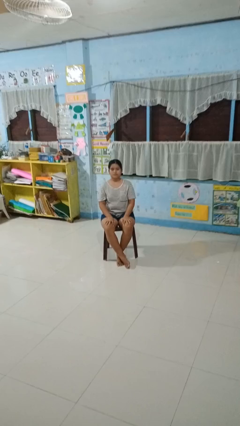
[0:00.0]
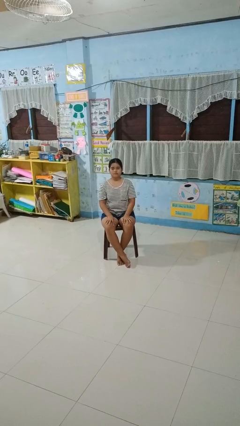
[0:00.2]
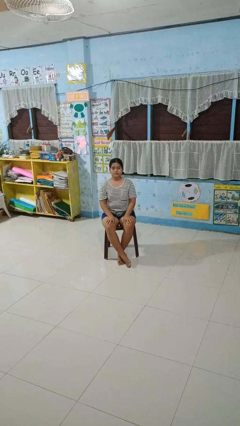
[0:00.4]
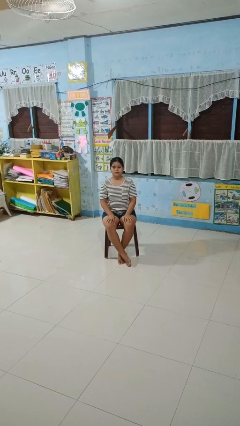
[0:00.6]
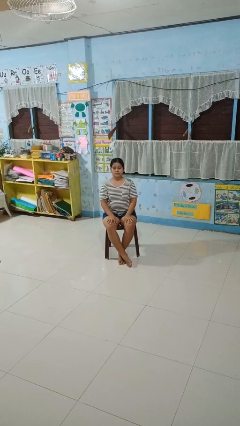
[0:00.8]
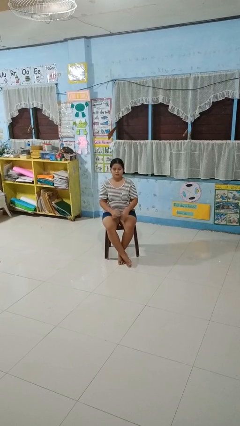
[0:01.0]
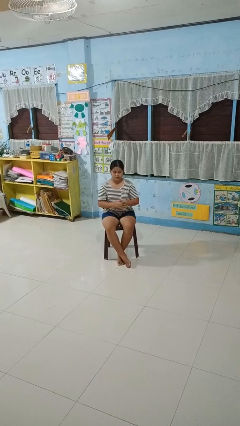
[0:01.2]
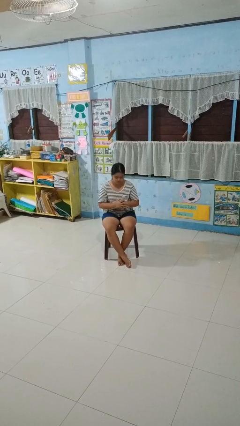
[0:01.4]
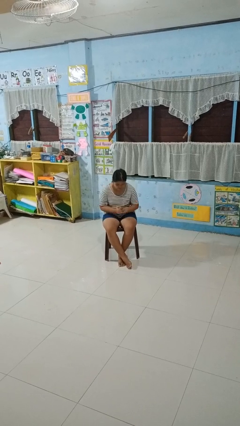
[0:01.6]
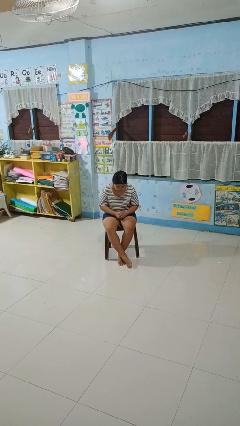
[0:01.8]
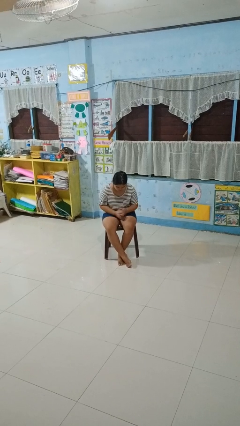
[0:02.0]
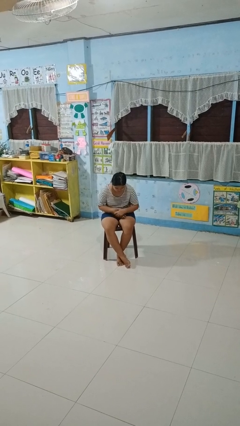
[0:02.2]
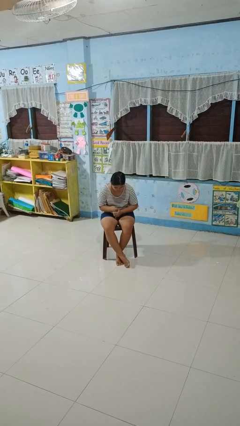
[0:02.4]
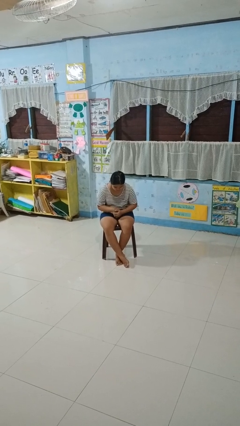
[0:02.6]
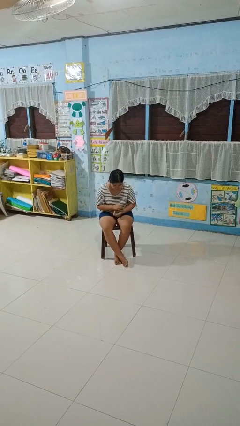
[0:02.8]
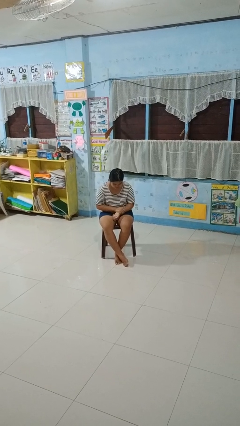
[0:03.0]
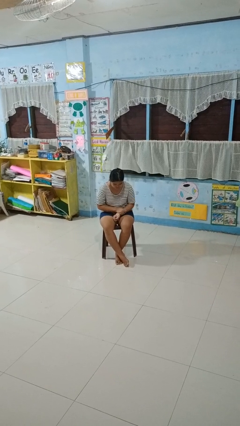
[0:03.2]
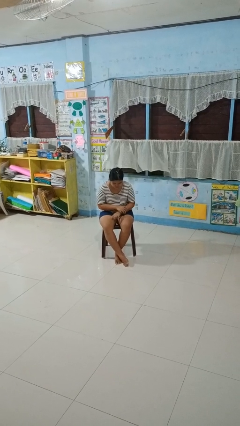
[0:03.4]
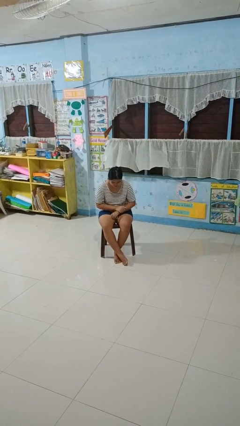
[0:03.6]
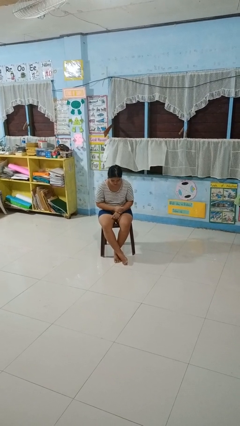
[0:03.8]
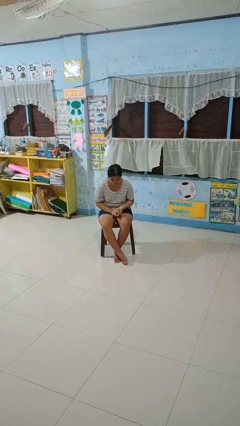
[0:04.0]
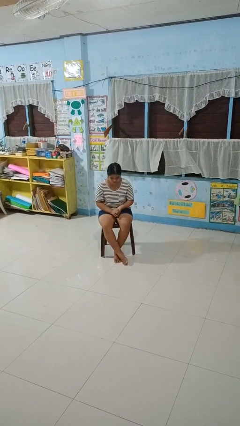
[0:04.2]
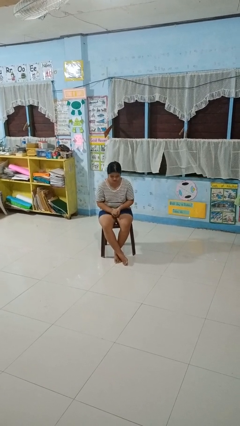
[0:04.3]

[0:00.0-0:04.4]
person looks at hands in lap

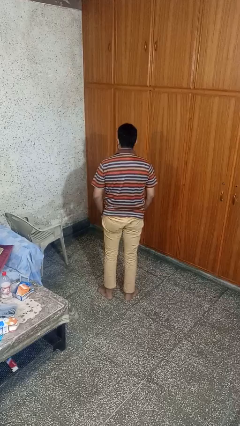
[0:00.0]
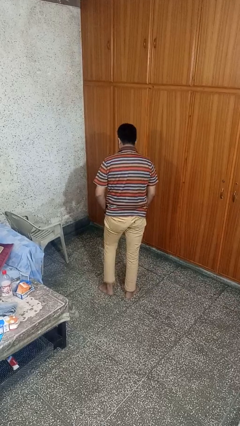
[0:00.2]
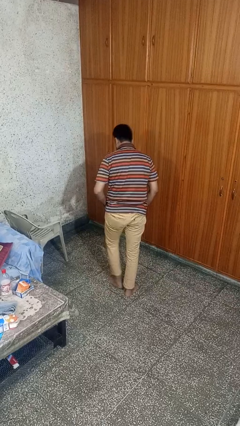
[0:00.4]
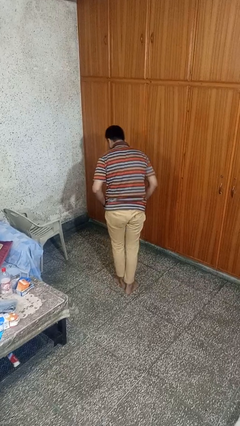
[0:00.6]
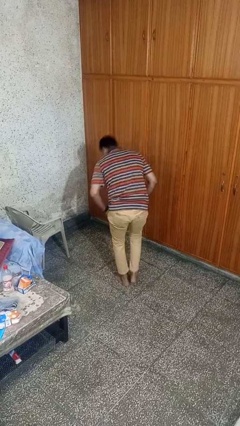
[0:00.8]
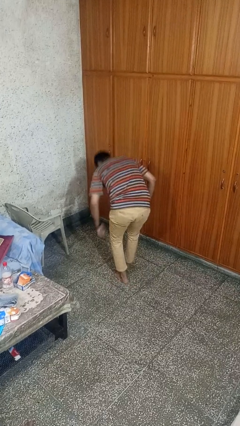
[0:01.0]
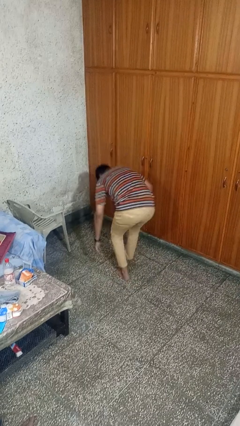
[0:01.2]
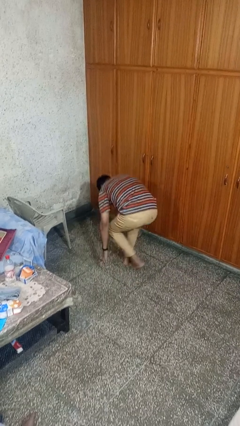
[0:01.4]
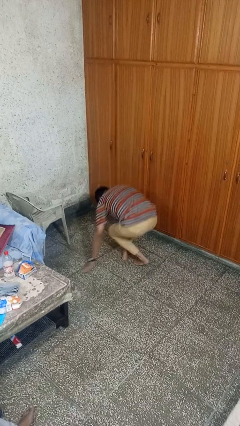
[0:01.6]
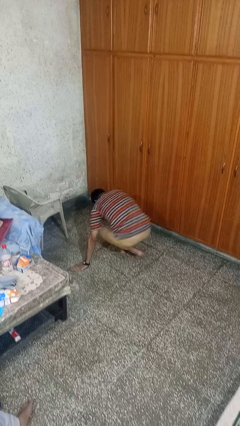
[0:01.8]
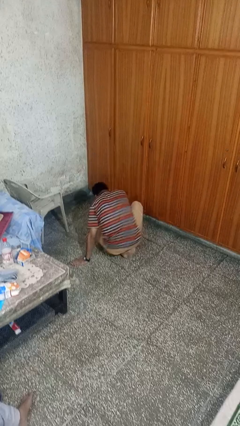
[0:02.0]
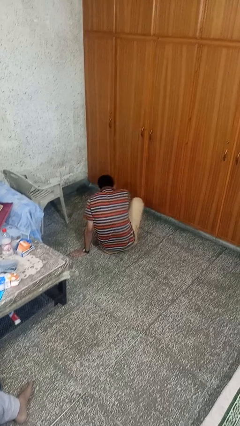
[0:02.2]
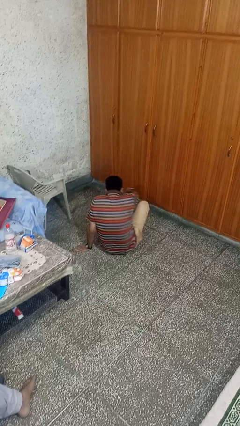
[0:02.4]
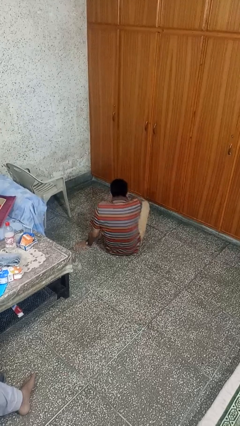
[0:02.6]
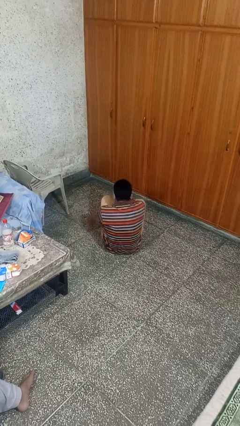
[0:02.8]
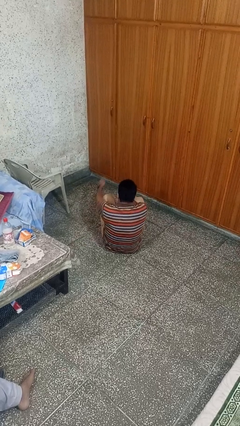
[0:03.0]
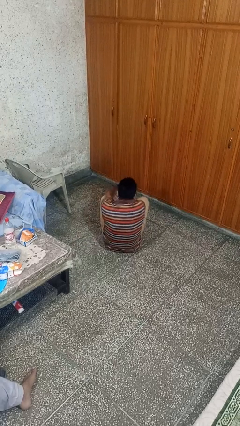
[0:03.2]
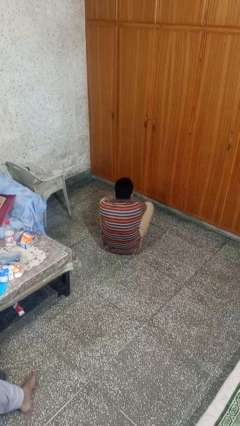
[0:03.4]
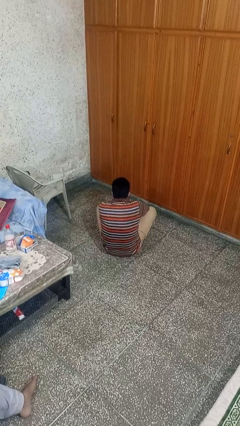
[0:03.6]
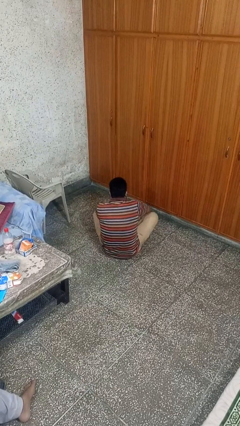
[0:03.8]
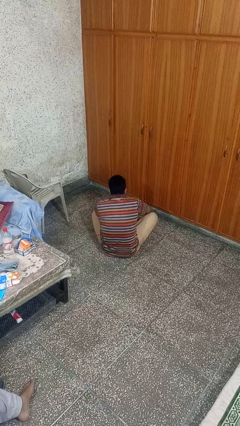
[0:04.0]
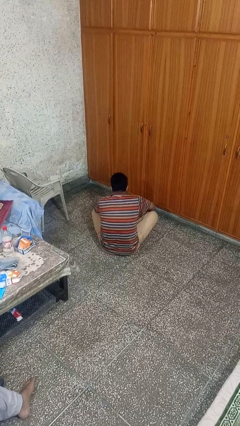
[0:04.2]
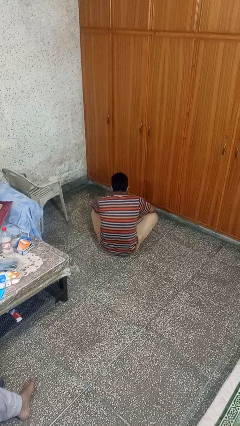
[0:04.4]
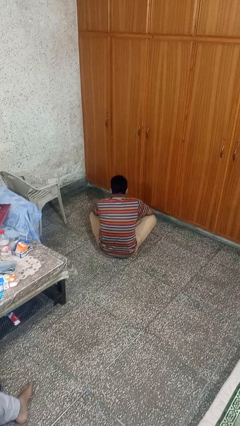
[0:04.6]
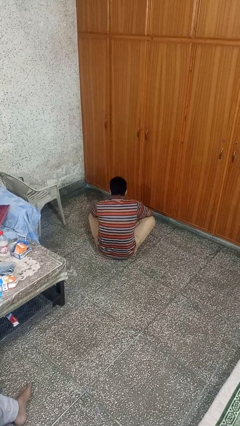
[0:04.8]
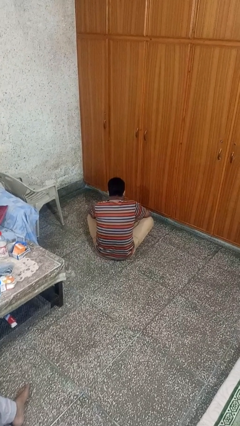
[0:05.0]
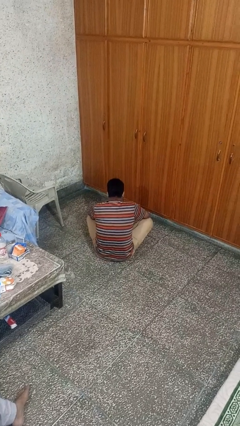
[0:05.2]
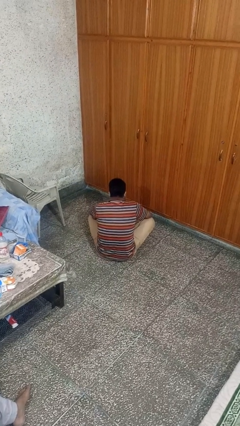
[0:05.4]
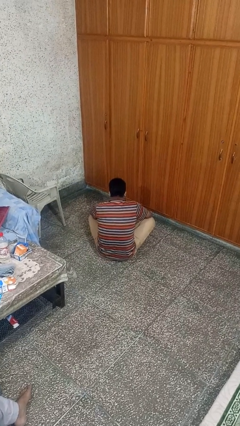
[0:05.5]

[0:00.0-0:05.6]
person sits crisscross

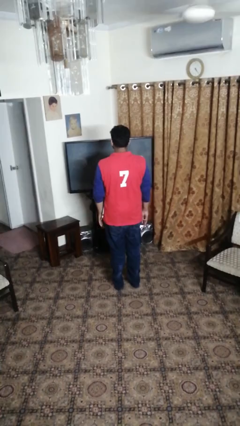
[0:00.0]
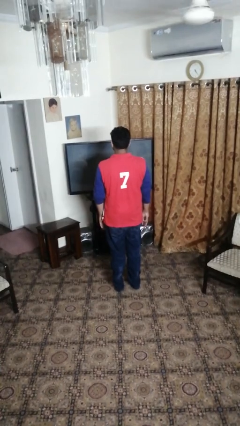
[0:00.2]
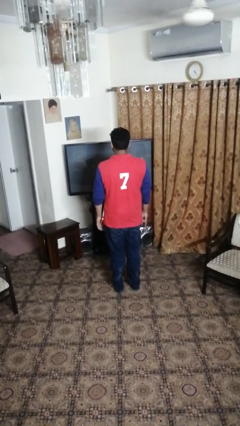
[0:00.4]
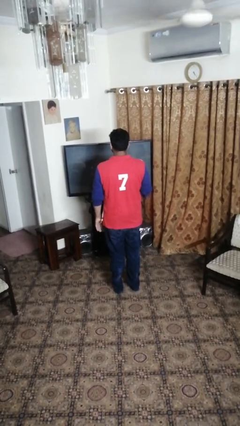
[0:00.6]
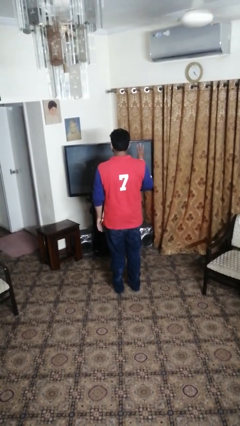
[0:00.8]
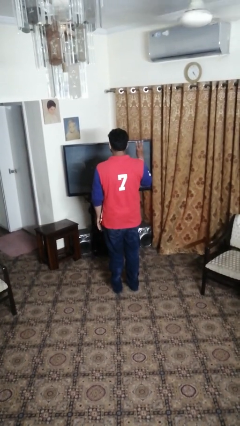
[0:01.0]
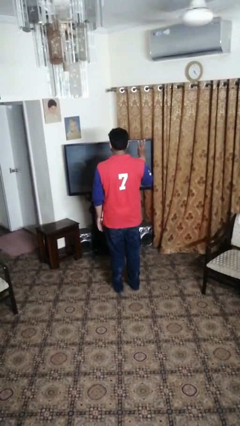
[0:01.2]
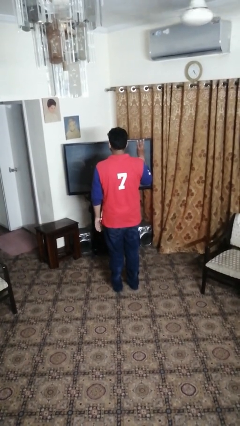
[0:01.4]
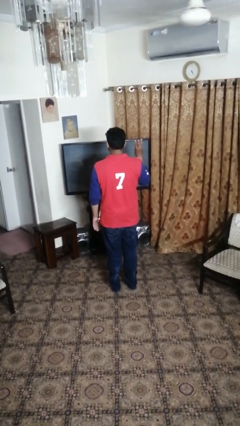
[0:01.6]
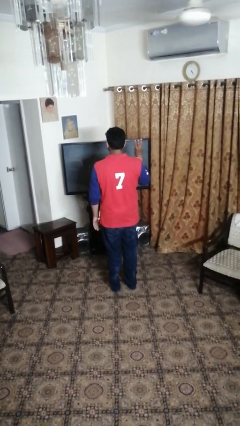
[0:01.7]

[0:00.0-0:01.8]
person gestures number three

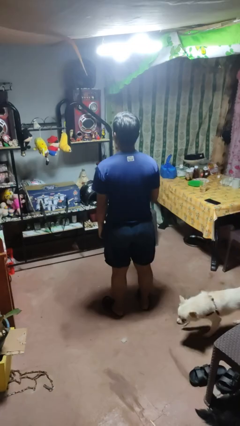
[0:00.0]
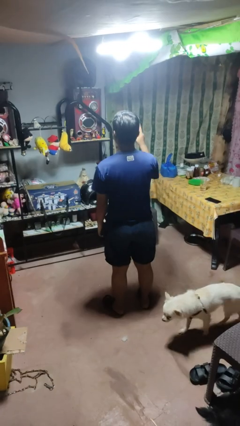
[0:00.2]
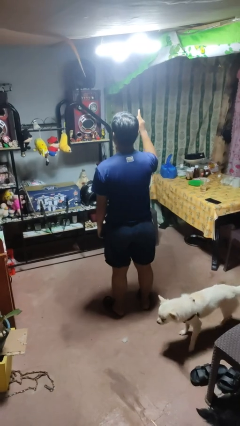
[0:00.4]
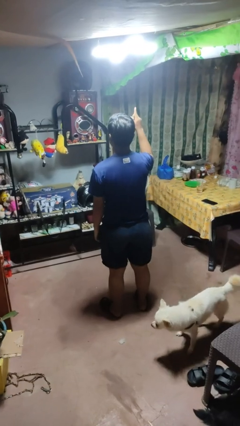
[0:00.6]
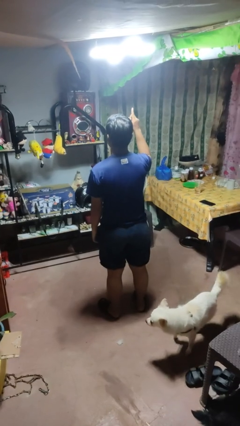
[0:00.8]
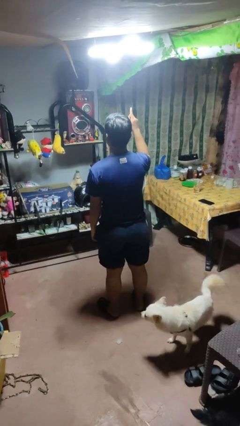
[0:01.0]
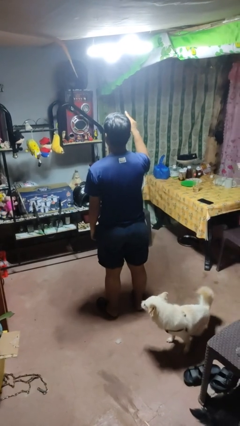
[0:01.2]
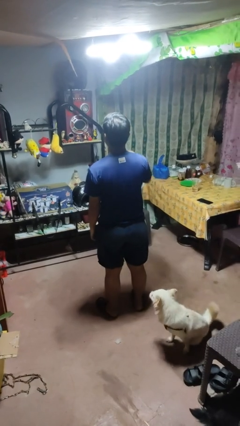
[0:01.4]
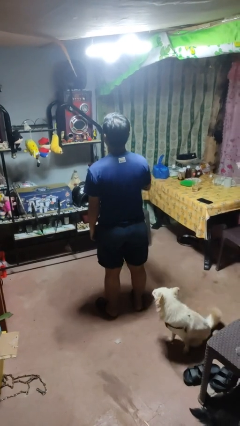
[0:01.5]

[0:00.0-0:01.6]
person gestures number one

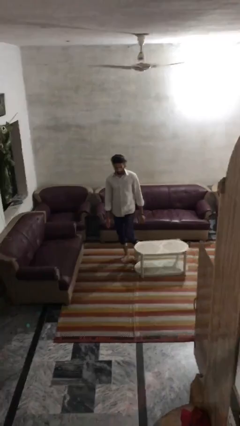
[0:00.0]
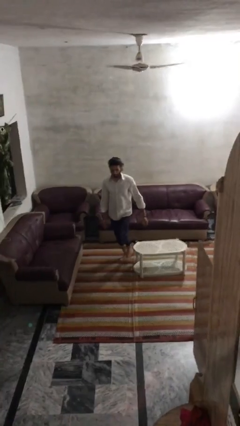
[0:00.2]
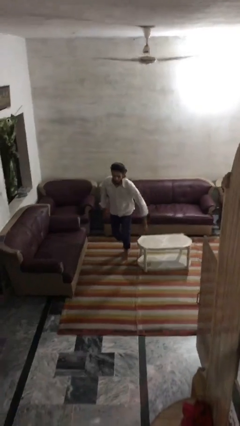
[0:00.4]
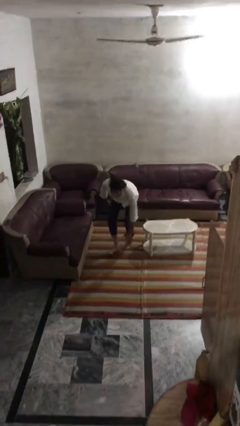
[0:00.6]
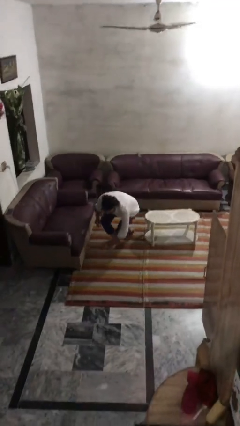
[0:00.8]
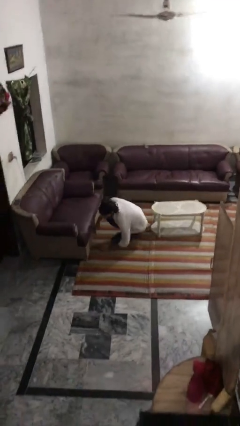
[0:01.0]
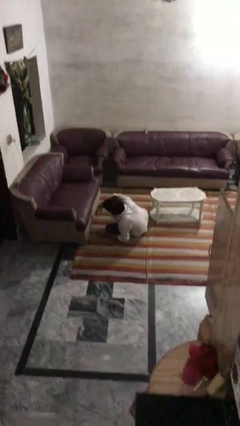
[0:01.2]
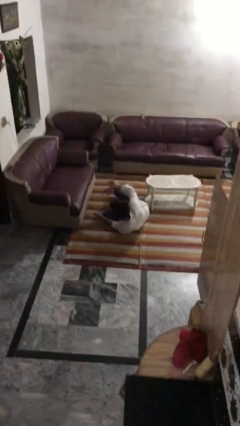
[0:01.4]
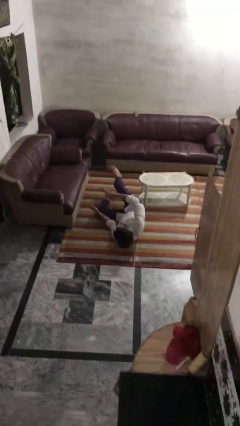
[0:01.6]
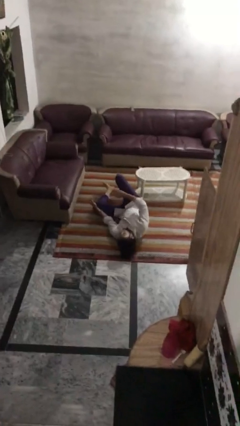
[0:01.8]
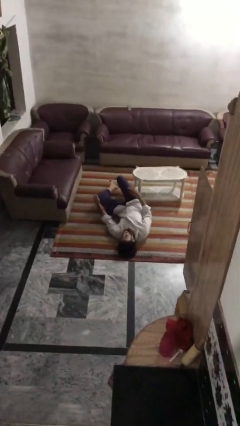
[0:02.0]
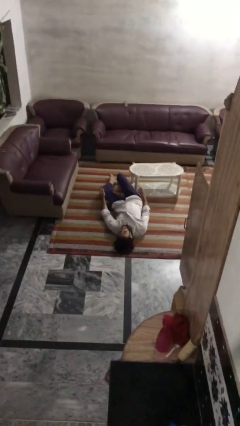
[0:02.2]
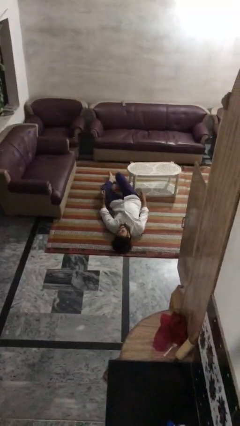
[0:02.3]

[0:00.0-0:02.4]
person trips on object on floor

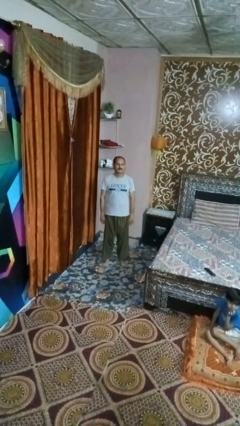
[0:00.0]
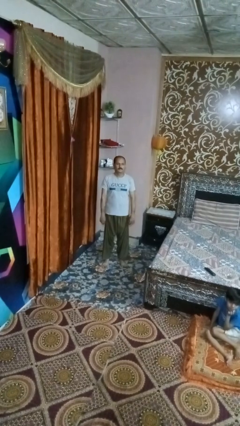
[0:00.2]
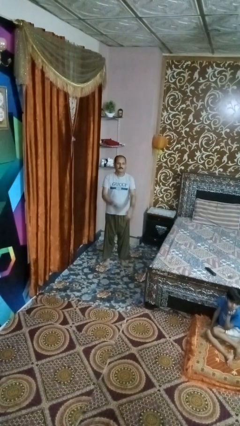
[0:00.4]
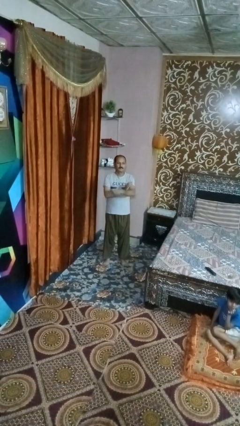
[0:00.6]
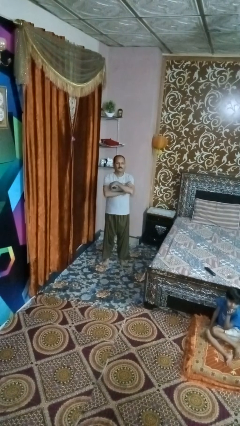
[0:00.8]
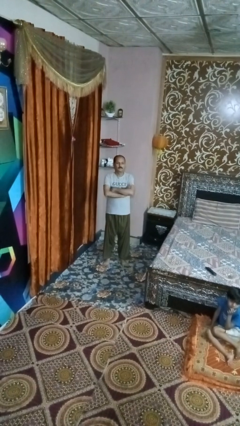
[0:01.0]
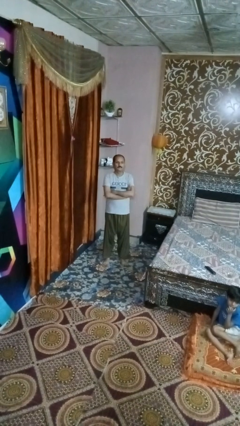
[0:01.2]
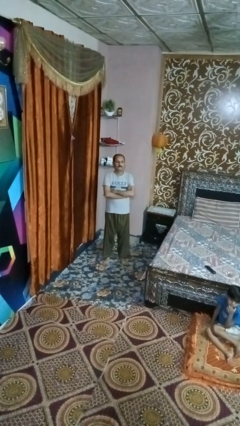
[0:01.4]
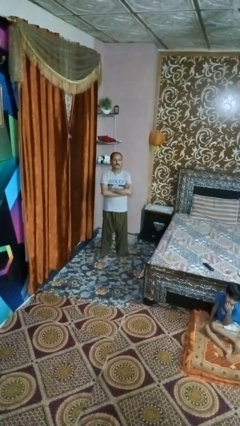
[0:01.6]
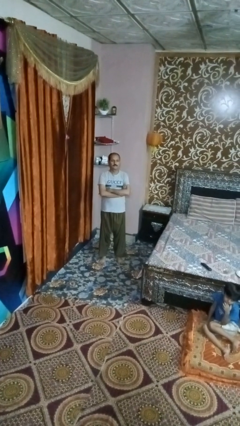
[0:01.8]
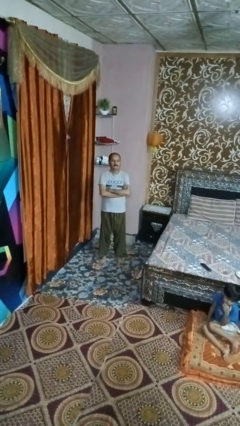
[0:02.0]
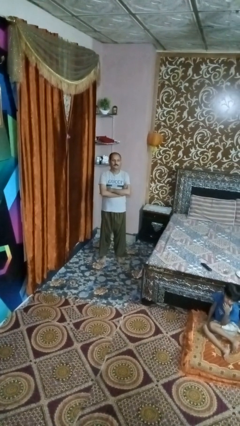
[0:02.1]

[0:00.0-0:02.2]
person crosses arms
